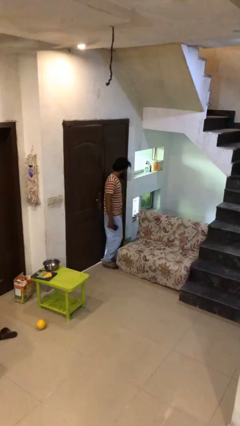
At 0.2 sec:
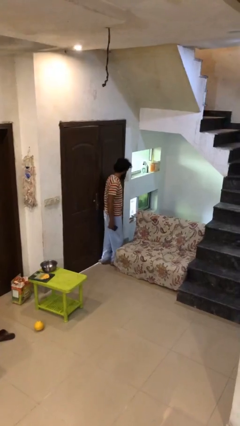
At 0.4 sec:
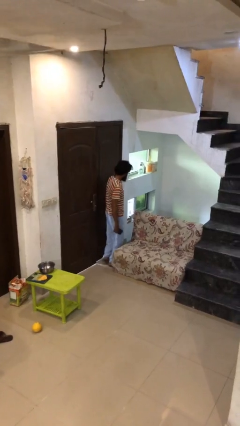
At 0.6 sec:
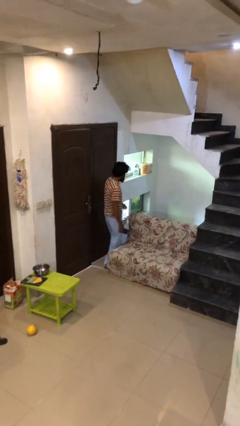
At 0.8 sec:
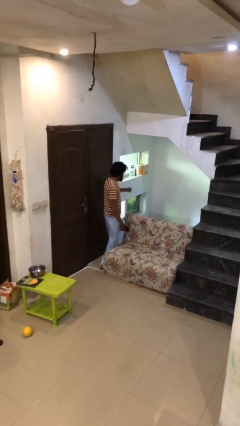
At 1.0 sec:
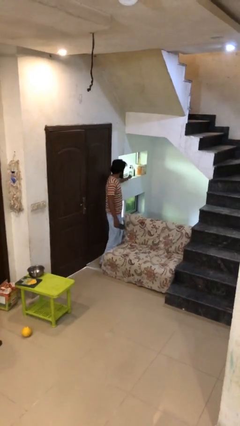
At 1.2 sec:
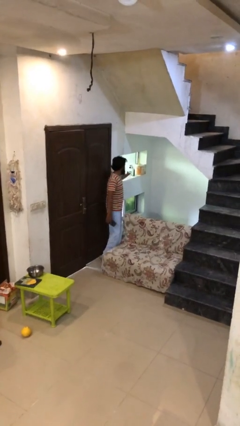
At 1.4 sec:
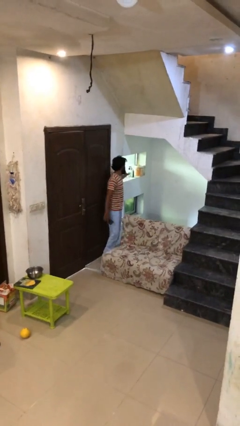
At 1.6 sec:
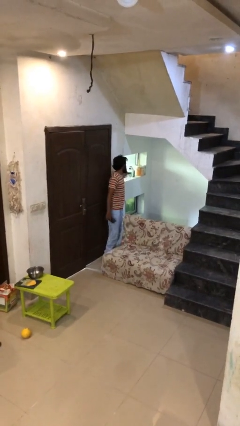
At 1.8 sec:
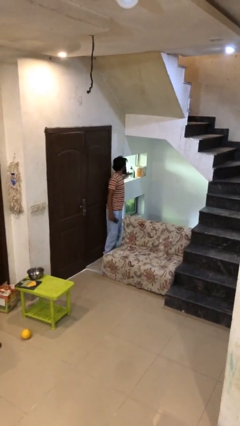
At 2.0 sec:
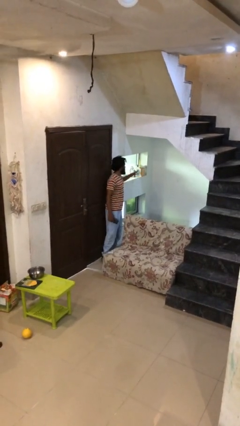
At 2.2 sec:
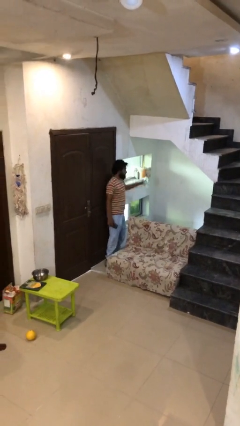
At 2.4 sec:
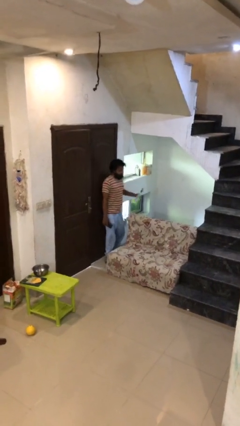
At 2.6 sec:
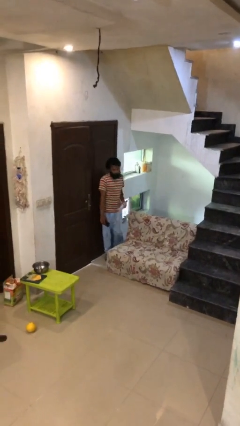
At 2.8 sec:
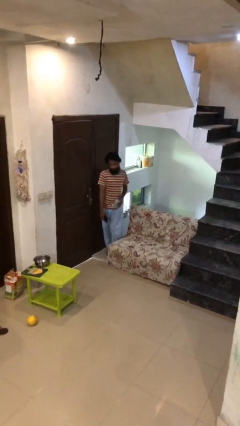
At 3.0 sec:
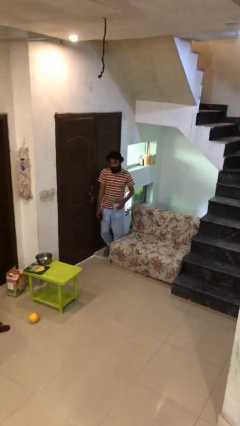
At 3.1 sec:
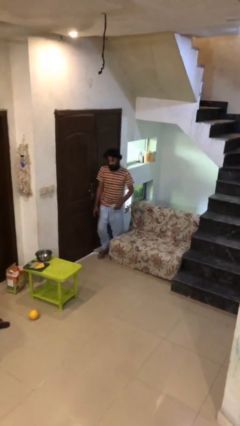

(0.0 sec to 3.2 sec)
person picks up object from shelf

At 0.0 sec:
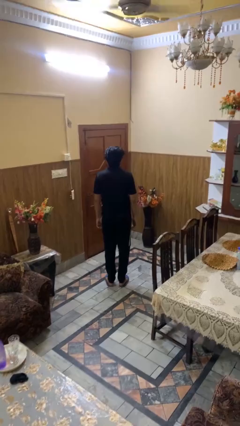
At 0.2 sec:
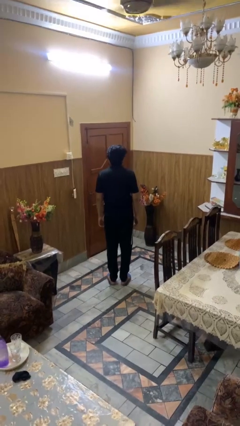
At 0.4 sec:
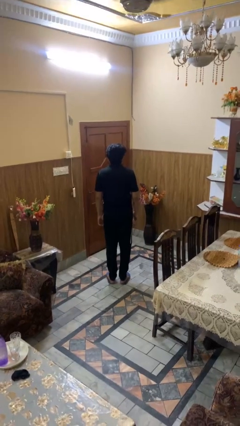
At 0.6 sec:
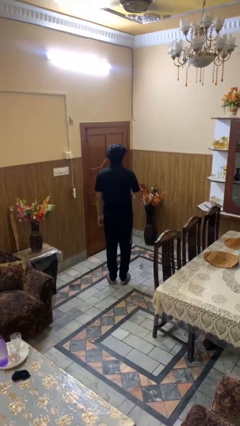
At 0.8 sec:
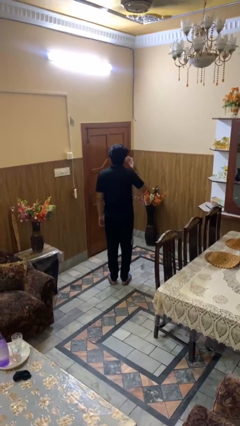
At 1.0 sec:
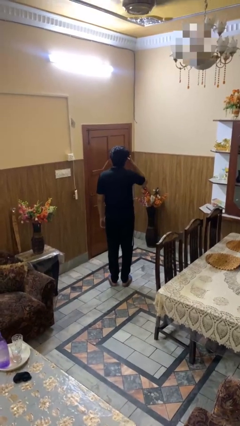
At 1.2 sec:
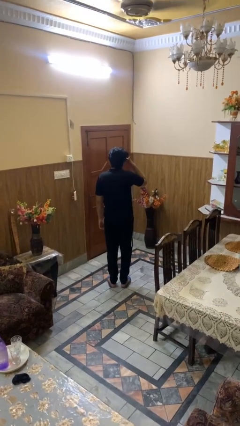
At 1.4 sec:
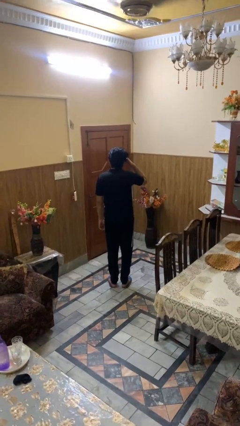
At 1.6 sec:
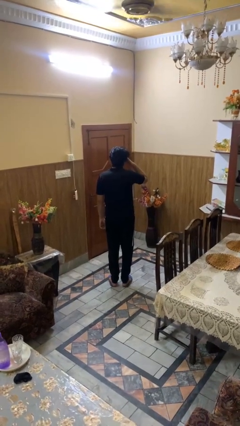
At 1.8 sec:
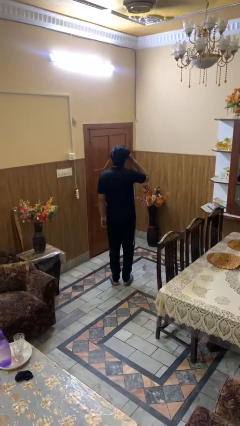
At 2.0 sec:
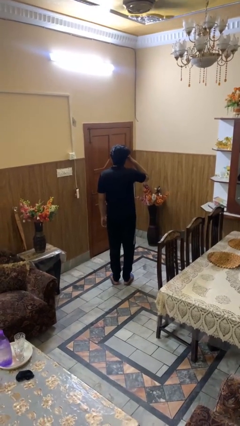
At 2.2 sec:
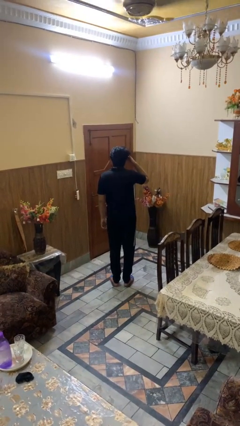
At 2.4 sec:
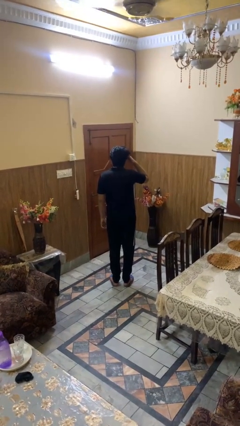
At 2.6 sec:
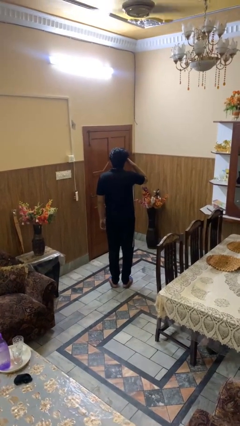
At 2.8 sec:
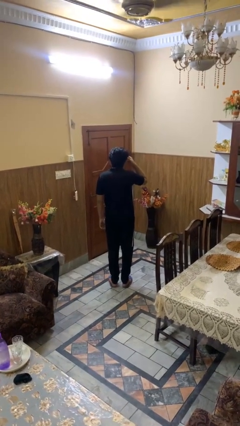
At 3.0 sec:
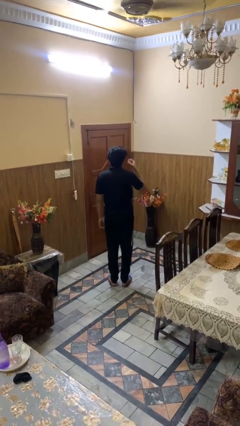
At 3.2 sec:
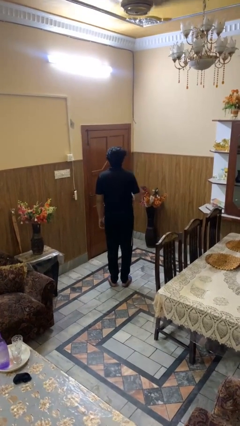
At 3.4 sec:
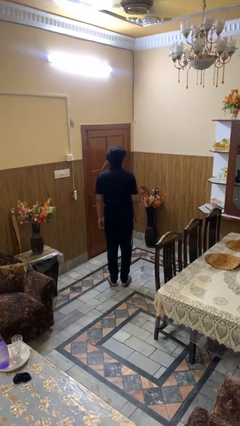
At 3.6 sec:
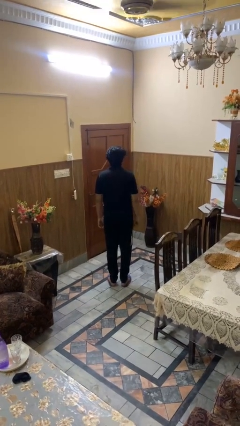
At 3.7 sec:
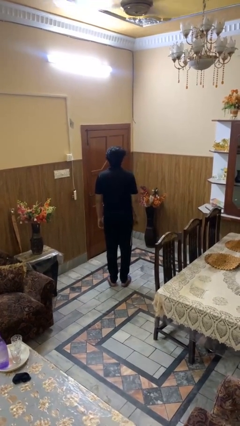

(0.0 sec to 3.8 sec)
person rubs eyes

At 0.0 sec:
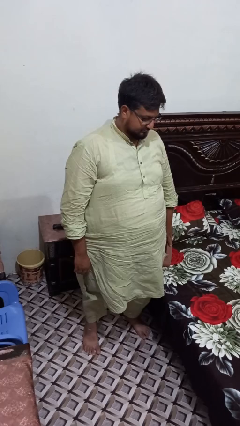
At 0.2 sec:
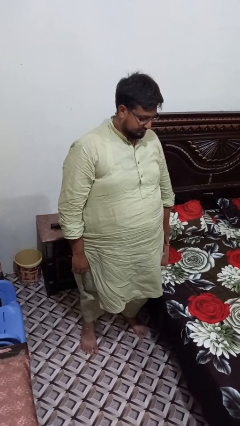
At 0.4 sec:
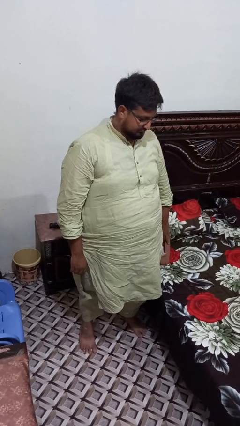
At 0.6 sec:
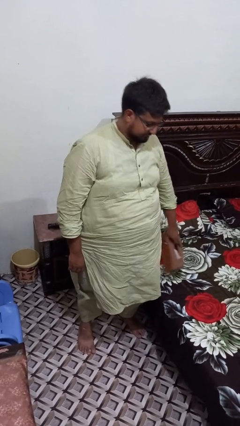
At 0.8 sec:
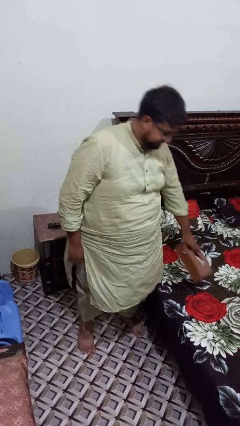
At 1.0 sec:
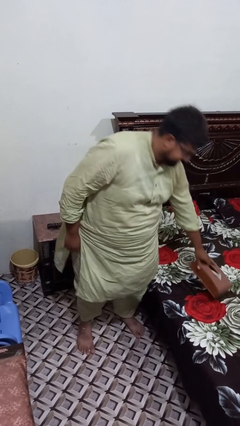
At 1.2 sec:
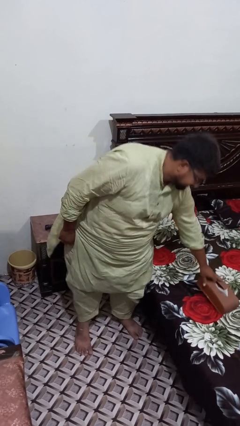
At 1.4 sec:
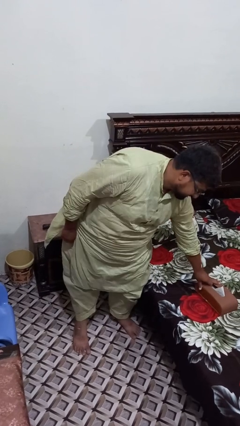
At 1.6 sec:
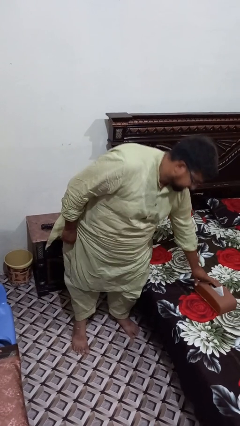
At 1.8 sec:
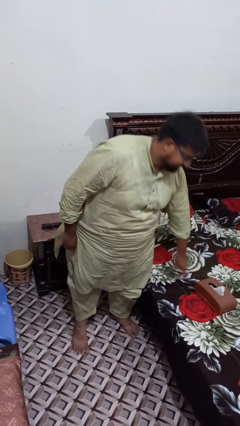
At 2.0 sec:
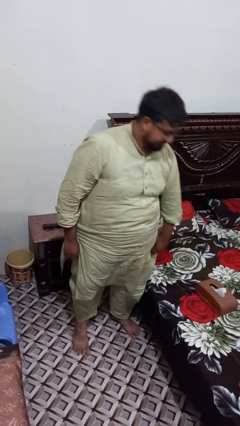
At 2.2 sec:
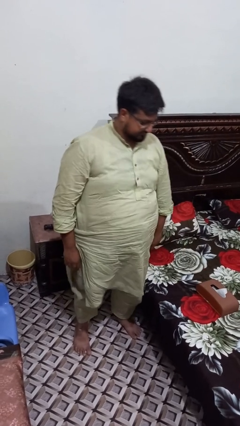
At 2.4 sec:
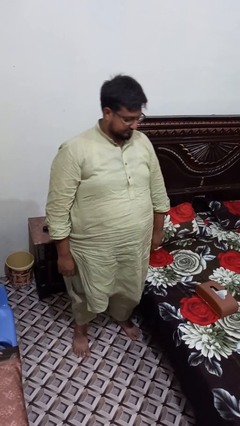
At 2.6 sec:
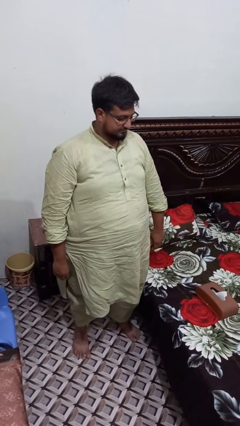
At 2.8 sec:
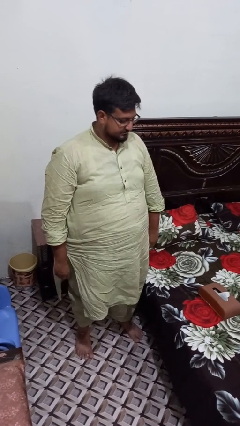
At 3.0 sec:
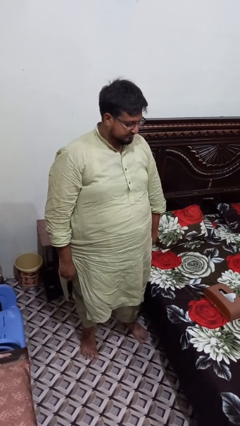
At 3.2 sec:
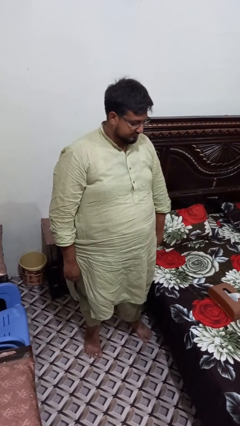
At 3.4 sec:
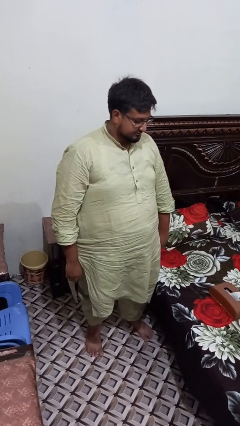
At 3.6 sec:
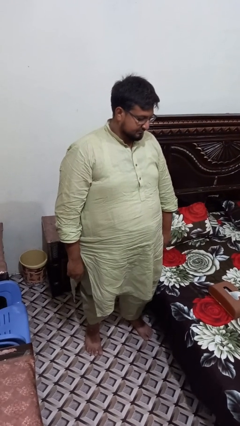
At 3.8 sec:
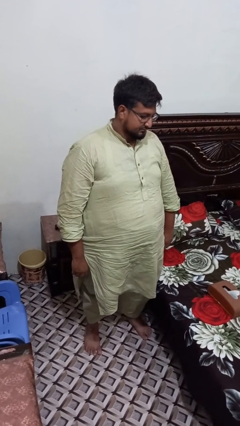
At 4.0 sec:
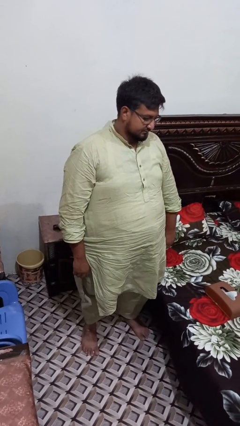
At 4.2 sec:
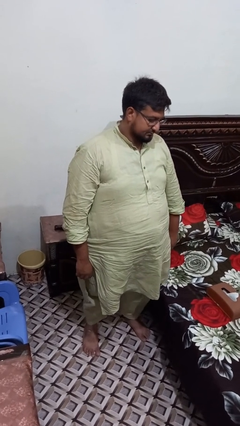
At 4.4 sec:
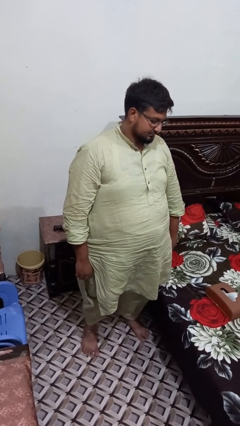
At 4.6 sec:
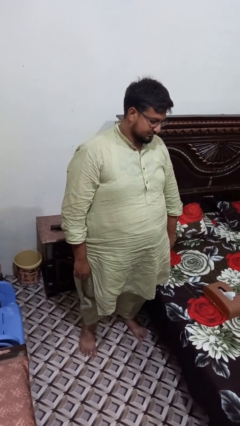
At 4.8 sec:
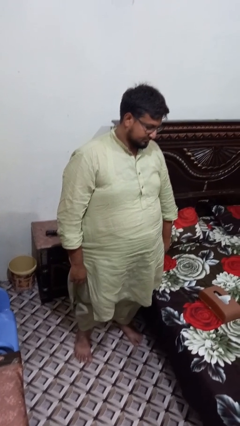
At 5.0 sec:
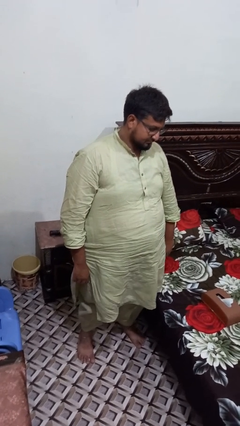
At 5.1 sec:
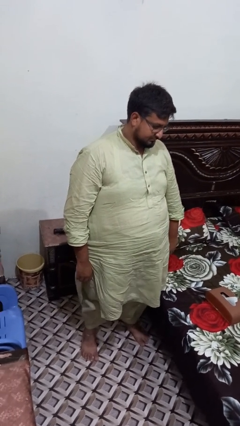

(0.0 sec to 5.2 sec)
person puts down object on bed

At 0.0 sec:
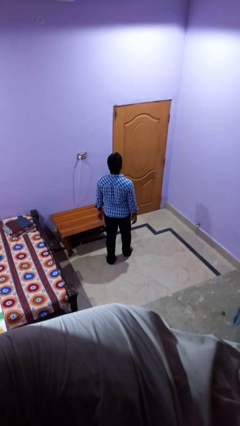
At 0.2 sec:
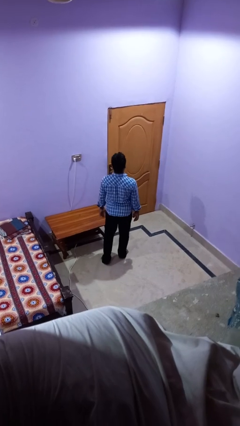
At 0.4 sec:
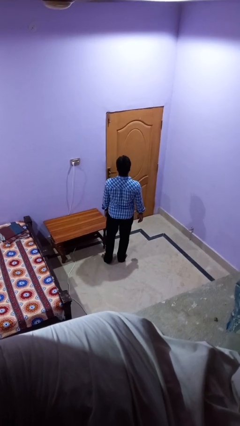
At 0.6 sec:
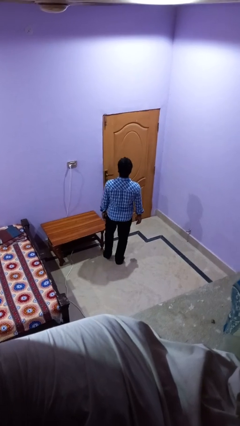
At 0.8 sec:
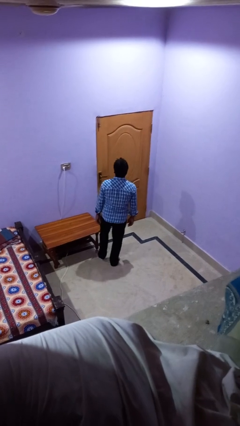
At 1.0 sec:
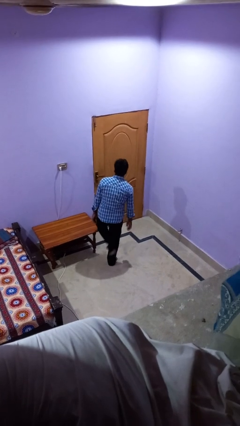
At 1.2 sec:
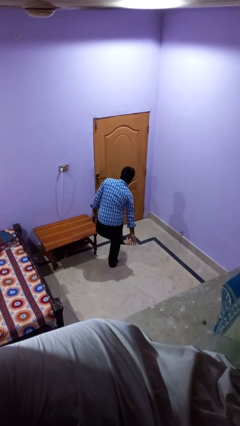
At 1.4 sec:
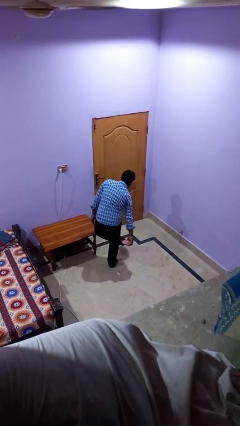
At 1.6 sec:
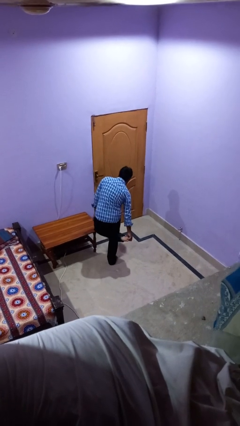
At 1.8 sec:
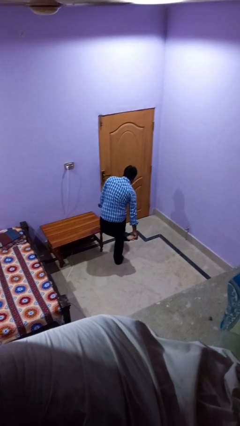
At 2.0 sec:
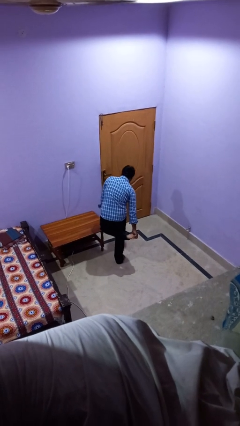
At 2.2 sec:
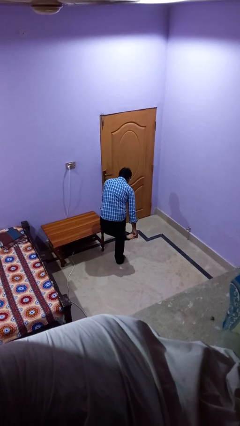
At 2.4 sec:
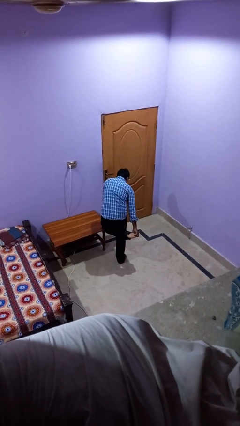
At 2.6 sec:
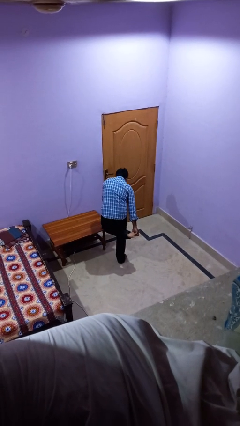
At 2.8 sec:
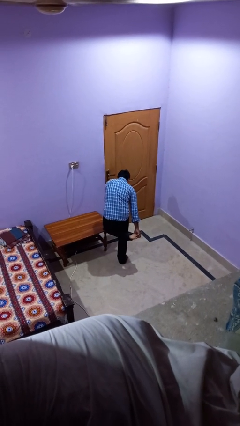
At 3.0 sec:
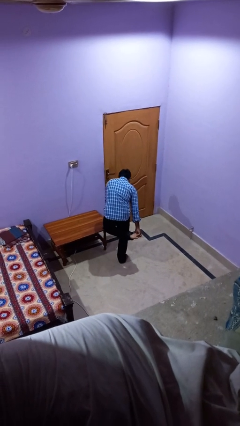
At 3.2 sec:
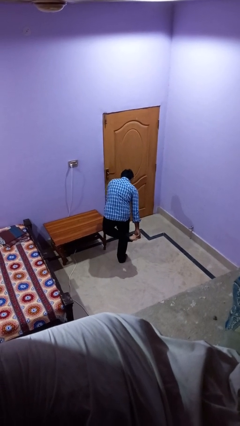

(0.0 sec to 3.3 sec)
person stubs toe

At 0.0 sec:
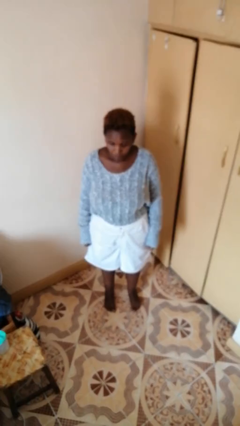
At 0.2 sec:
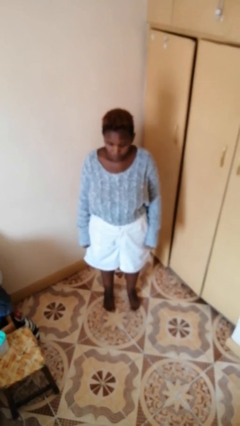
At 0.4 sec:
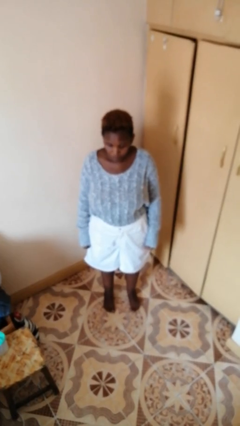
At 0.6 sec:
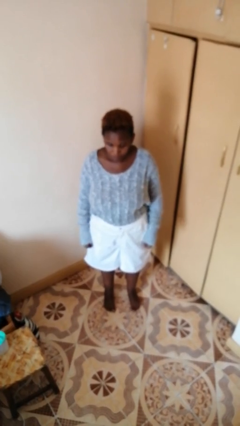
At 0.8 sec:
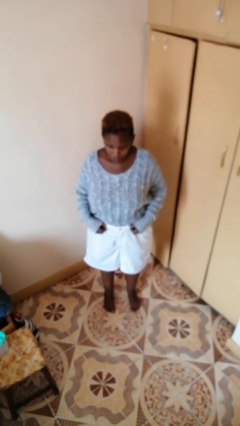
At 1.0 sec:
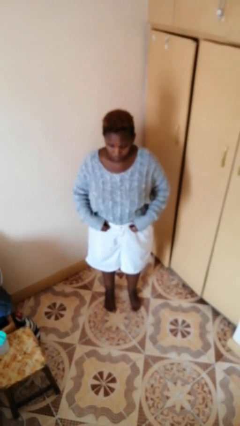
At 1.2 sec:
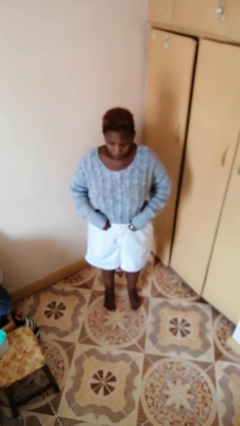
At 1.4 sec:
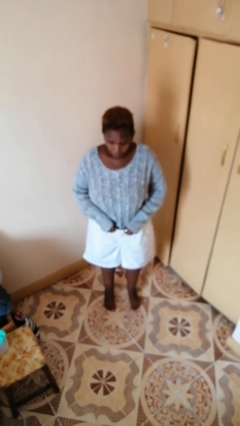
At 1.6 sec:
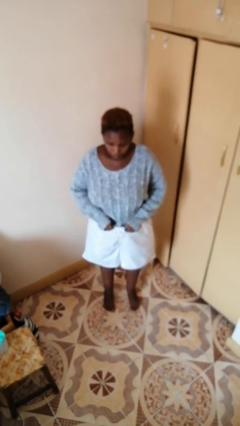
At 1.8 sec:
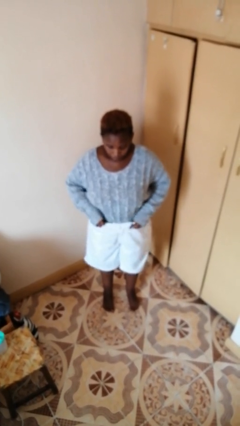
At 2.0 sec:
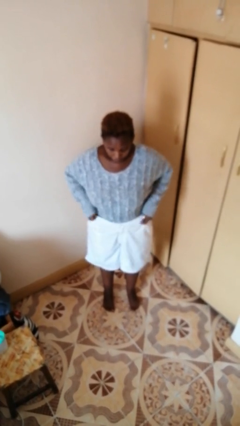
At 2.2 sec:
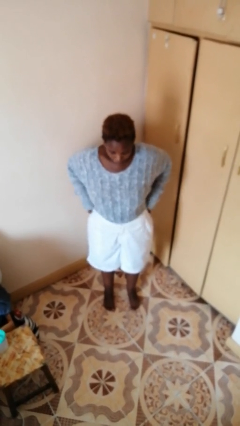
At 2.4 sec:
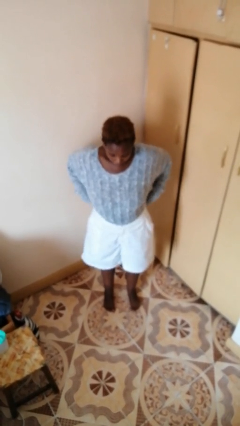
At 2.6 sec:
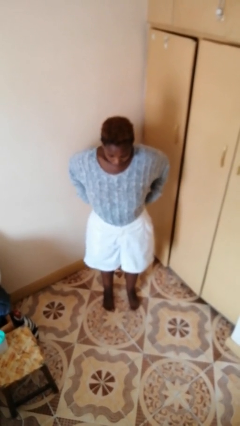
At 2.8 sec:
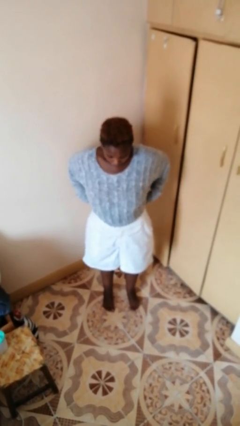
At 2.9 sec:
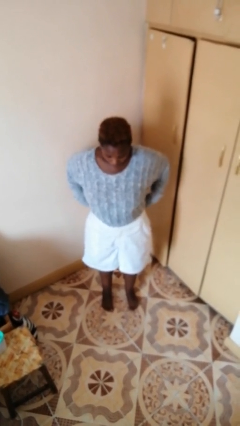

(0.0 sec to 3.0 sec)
person hikes up pants
